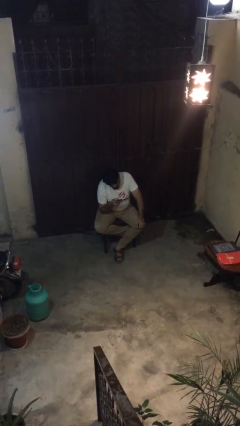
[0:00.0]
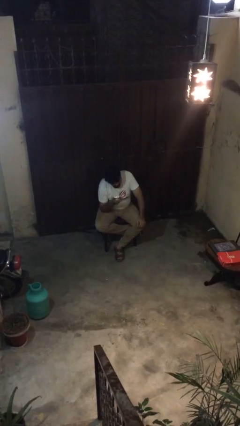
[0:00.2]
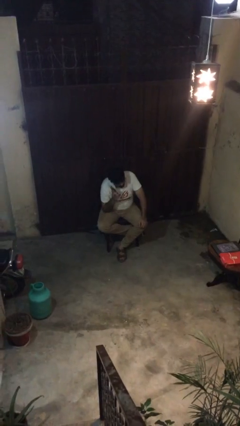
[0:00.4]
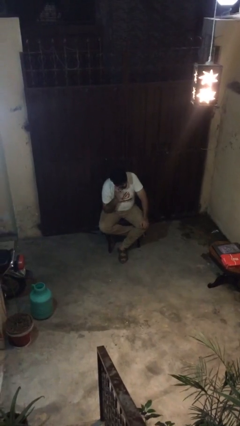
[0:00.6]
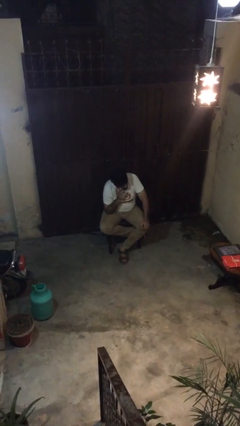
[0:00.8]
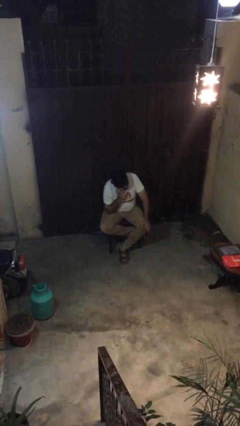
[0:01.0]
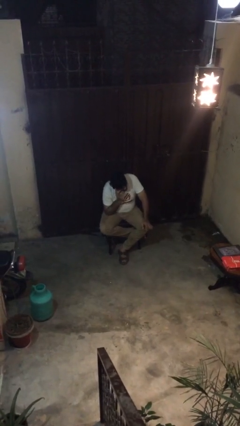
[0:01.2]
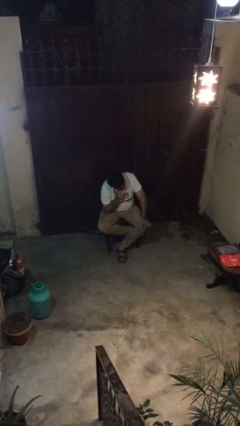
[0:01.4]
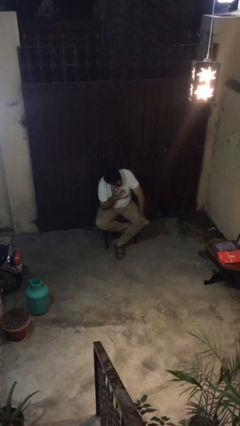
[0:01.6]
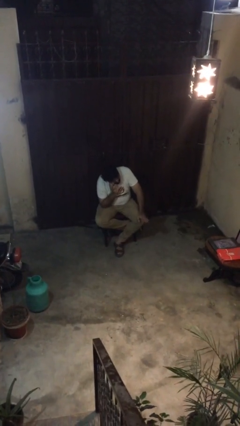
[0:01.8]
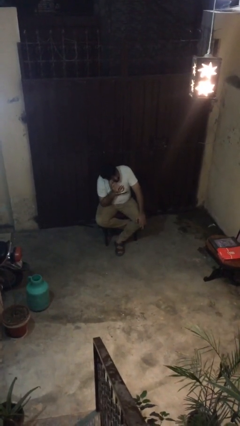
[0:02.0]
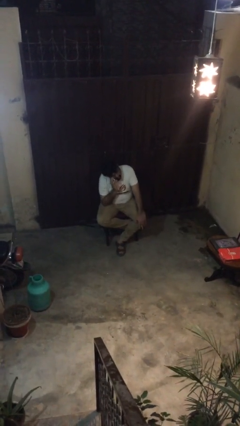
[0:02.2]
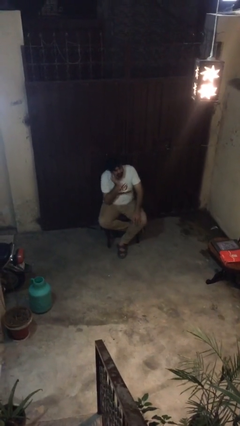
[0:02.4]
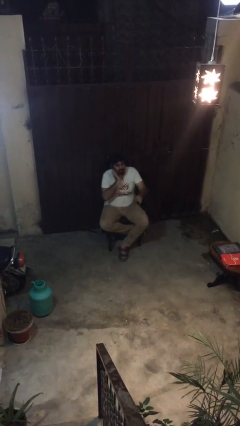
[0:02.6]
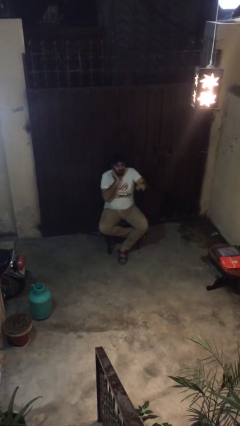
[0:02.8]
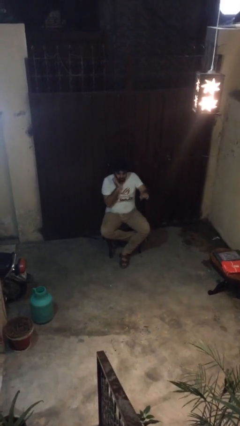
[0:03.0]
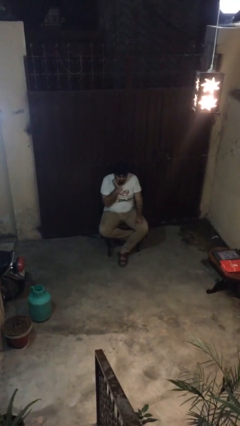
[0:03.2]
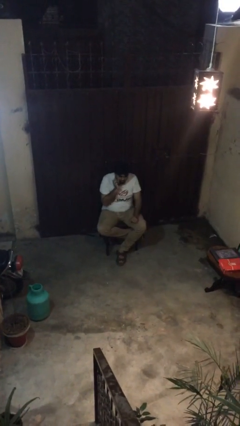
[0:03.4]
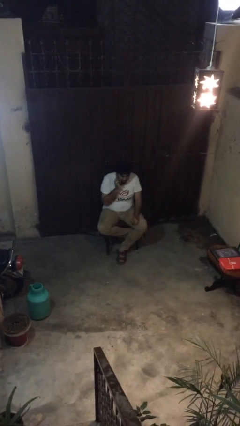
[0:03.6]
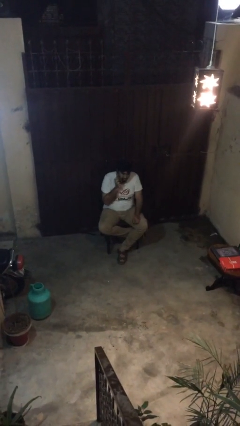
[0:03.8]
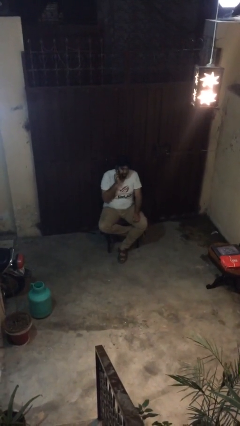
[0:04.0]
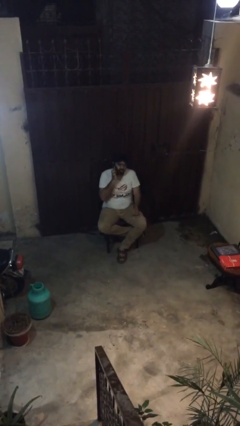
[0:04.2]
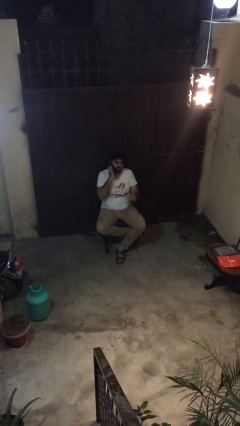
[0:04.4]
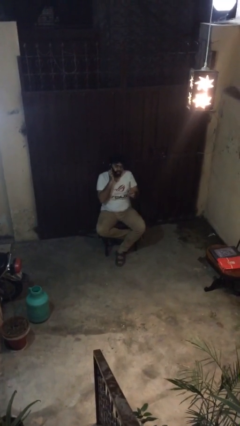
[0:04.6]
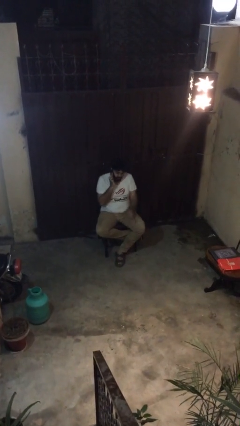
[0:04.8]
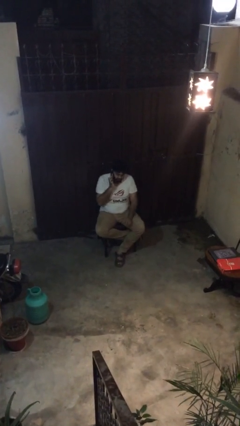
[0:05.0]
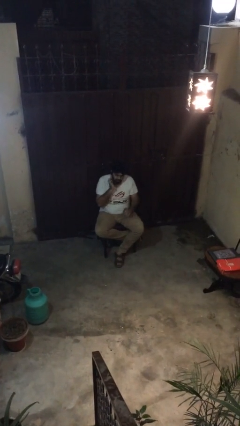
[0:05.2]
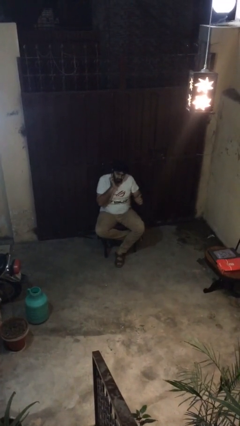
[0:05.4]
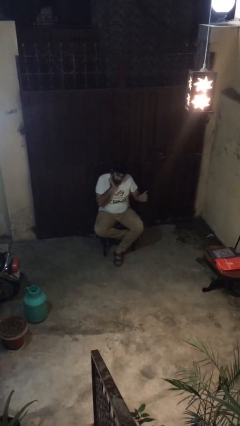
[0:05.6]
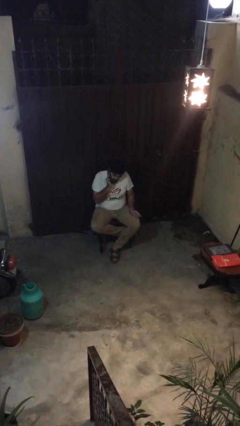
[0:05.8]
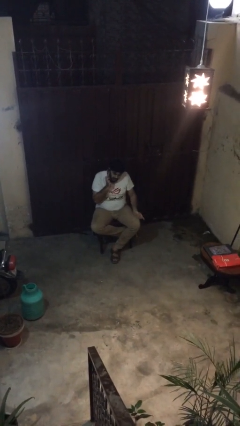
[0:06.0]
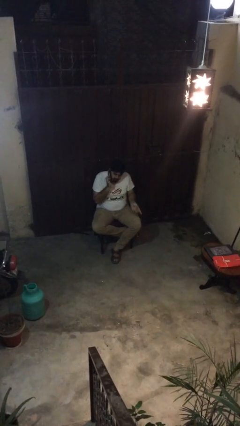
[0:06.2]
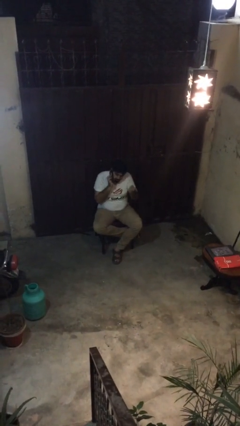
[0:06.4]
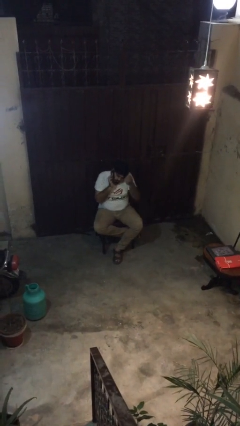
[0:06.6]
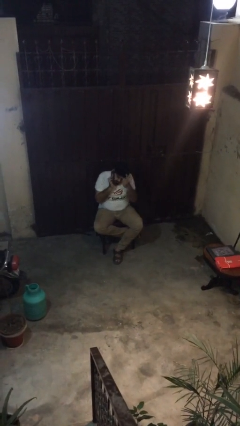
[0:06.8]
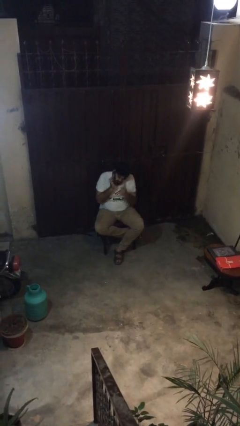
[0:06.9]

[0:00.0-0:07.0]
person talks on phone

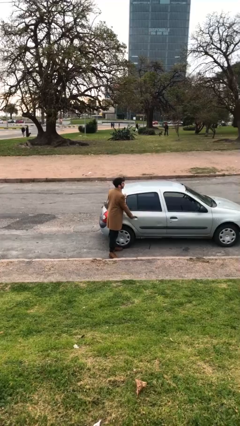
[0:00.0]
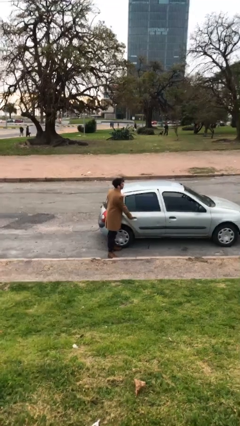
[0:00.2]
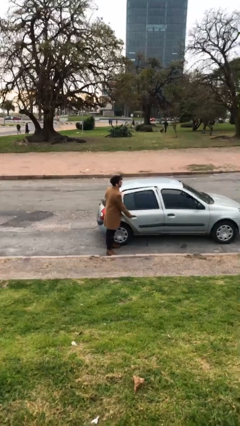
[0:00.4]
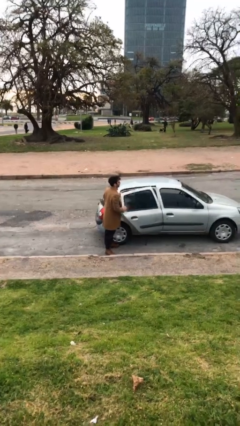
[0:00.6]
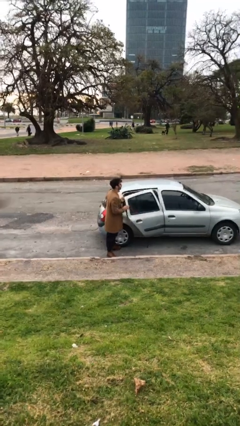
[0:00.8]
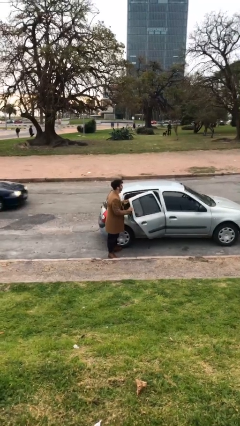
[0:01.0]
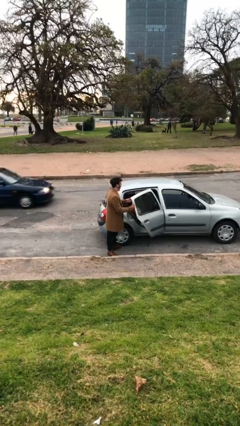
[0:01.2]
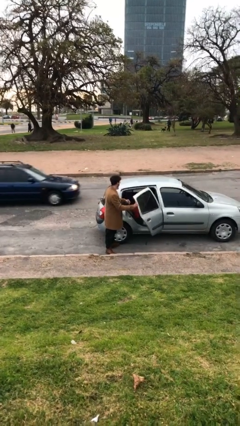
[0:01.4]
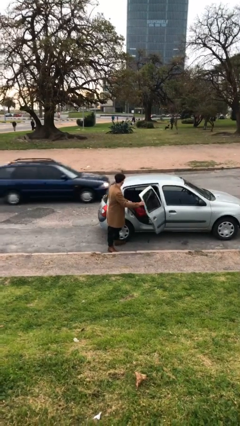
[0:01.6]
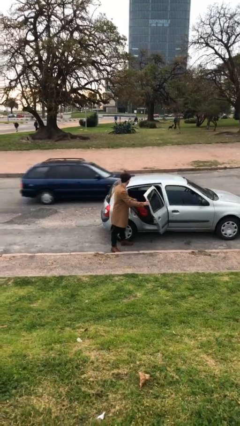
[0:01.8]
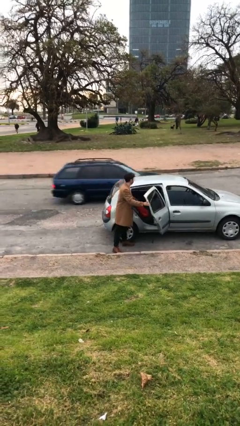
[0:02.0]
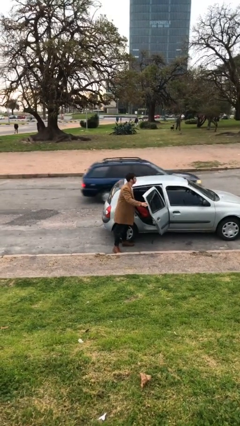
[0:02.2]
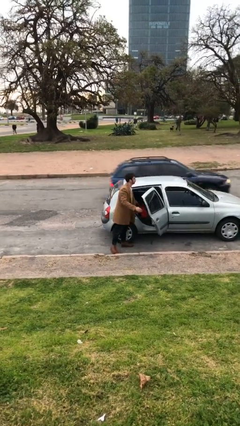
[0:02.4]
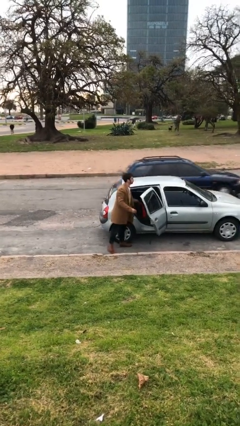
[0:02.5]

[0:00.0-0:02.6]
person opens car door

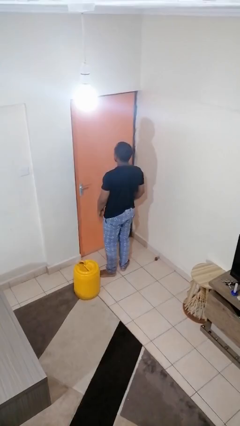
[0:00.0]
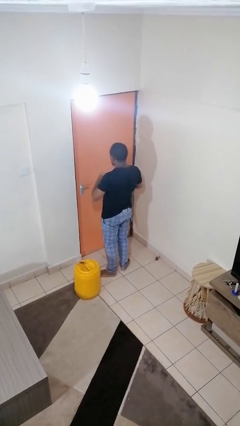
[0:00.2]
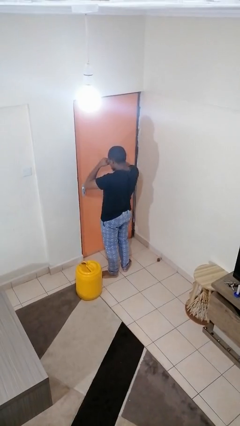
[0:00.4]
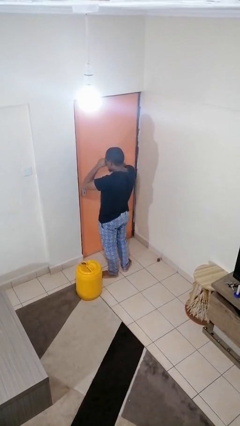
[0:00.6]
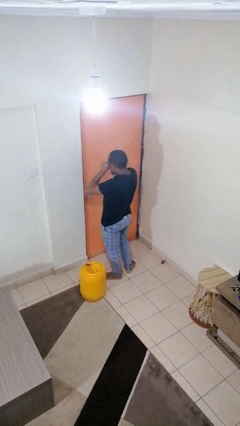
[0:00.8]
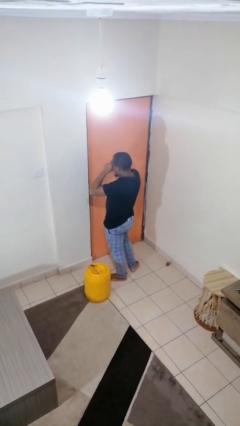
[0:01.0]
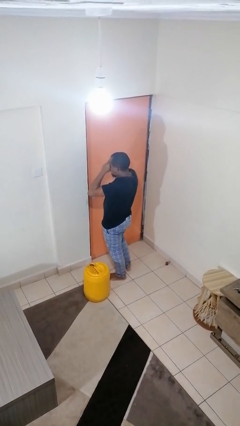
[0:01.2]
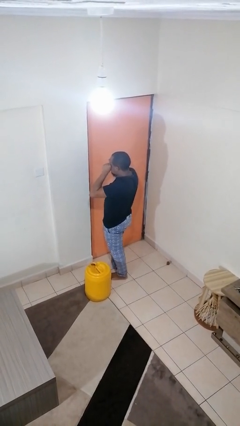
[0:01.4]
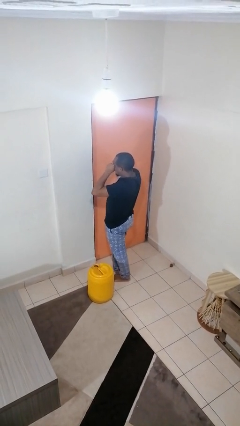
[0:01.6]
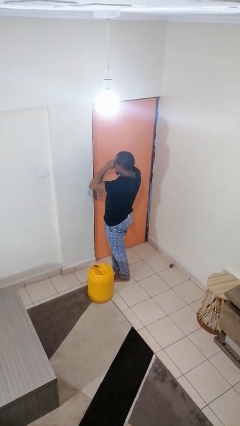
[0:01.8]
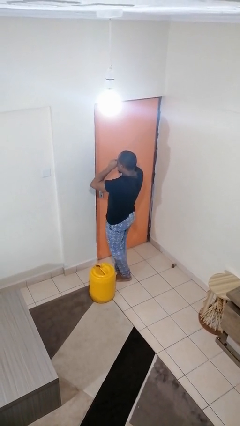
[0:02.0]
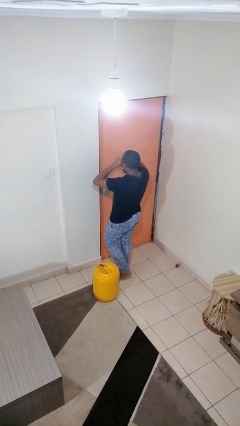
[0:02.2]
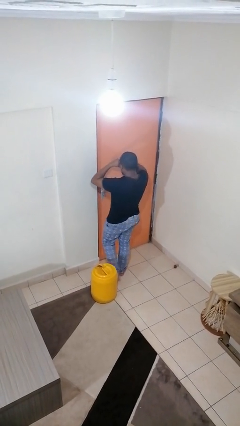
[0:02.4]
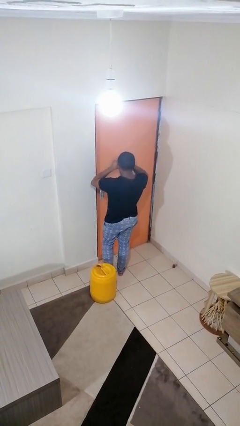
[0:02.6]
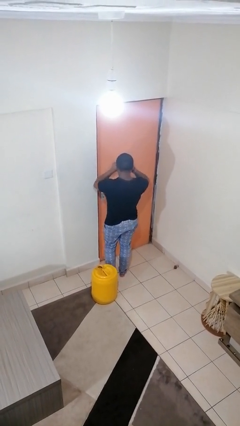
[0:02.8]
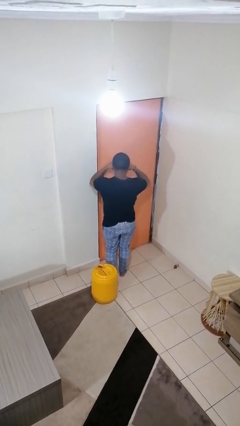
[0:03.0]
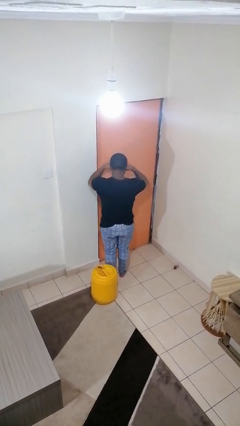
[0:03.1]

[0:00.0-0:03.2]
person rubs eyes

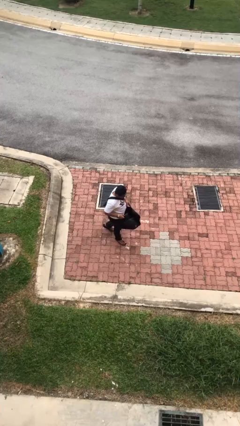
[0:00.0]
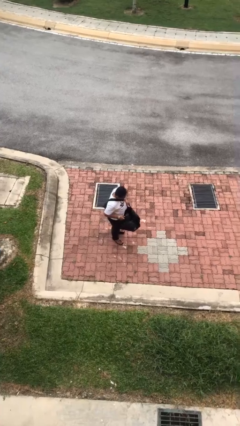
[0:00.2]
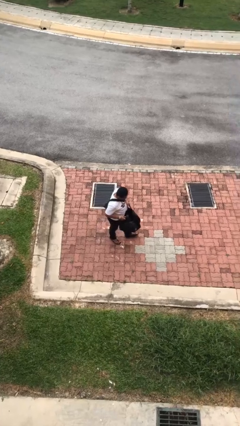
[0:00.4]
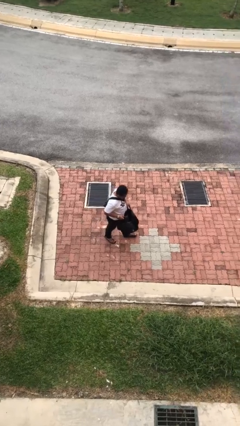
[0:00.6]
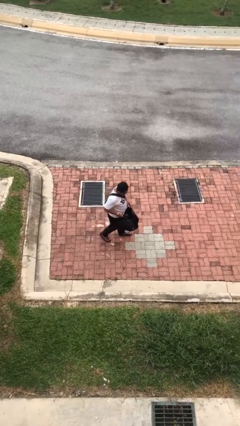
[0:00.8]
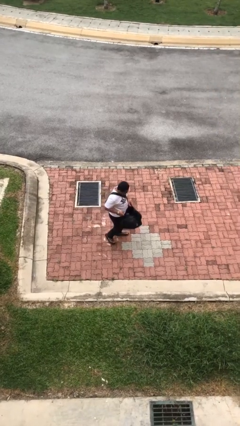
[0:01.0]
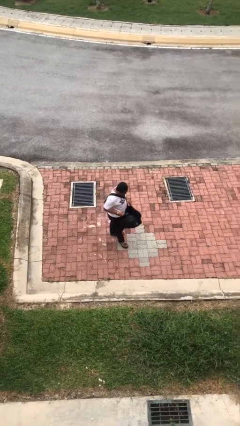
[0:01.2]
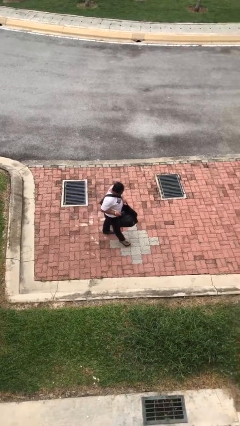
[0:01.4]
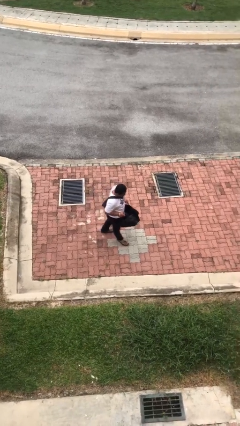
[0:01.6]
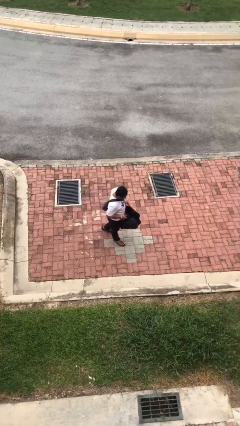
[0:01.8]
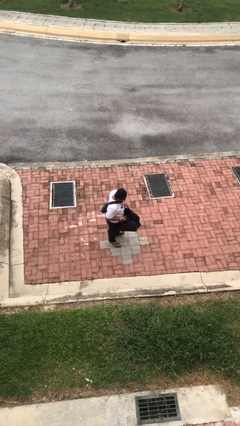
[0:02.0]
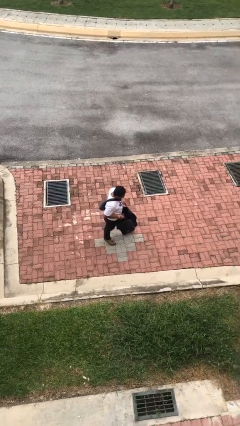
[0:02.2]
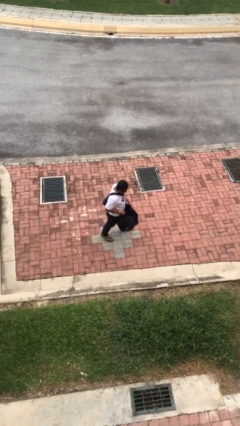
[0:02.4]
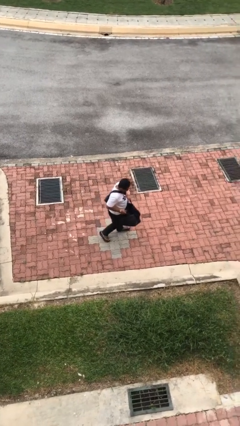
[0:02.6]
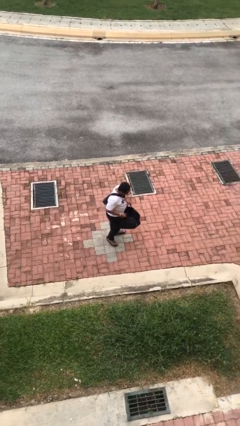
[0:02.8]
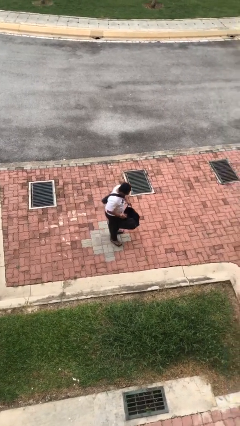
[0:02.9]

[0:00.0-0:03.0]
person carries heavy object

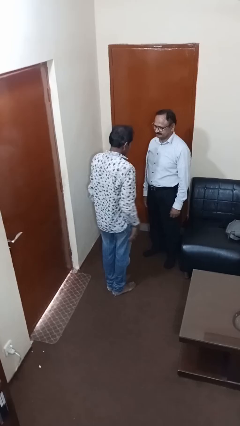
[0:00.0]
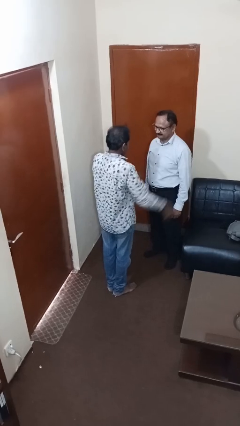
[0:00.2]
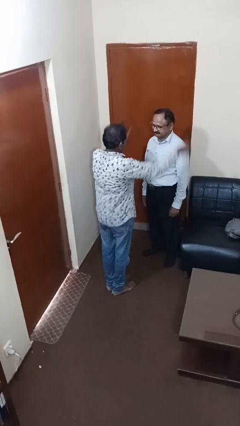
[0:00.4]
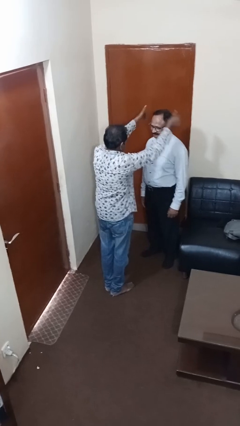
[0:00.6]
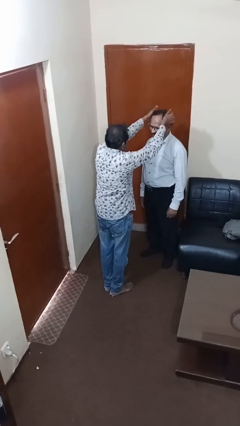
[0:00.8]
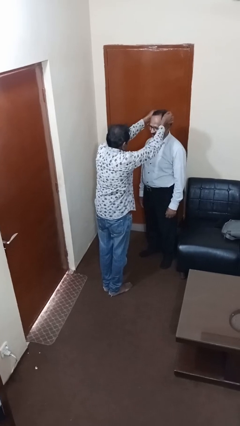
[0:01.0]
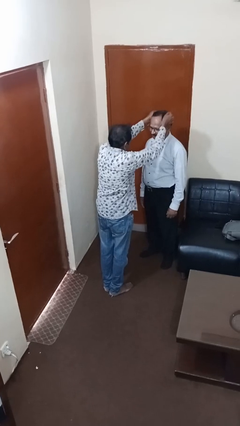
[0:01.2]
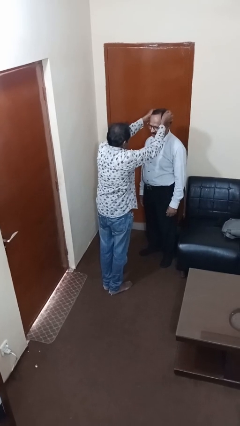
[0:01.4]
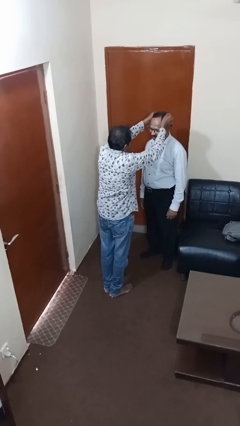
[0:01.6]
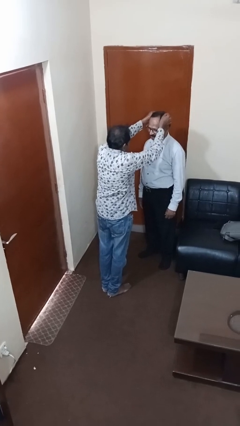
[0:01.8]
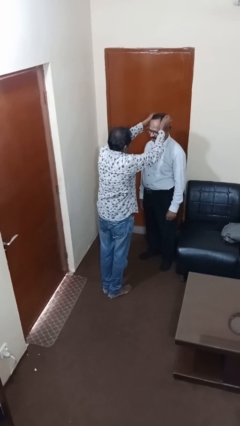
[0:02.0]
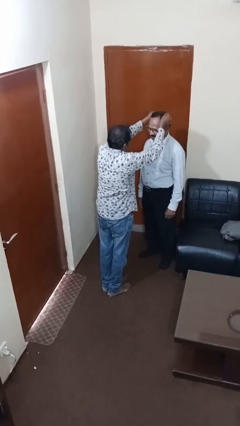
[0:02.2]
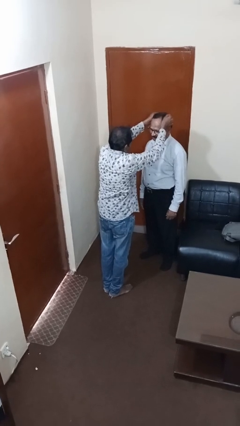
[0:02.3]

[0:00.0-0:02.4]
person grabs person by hair
